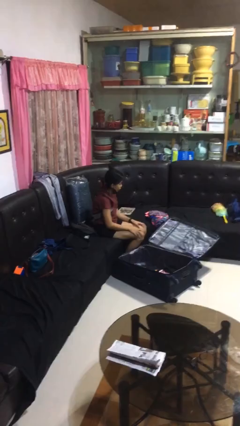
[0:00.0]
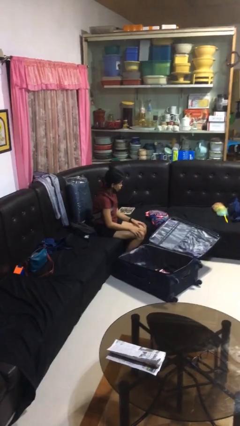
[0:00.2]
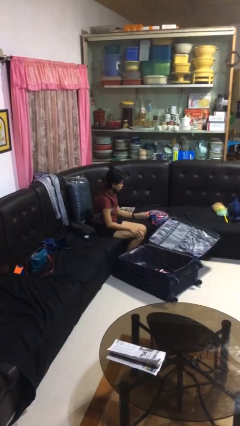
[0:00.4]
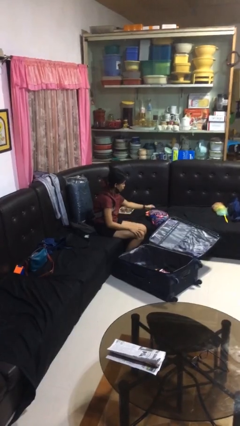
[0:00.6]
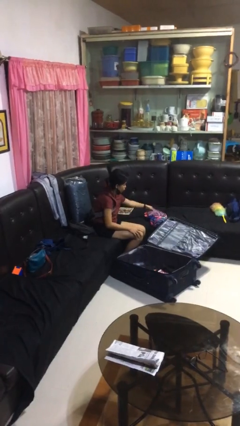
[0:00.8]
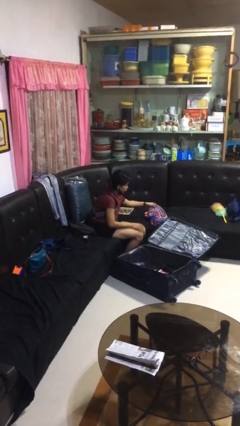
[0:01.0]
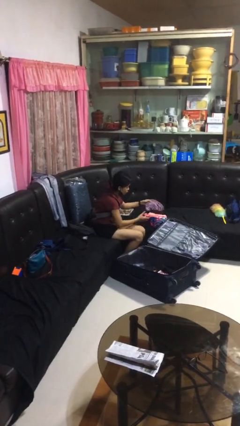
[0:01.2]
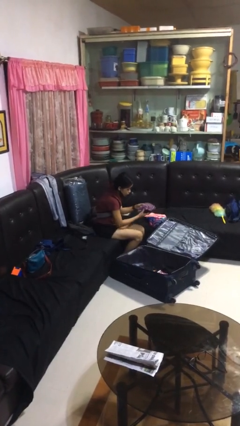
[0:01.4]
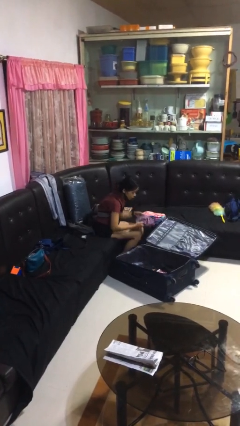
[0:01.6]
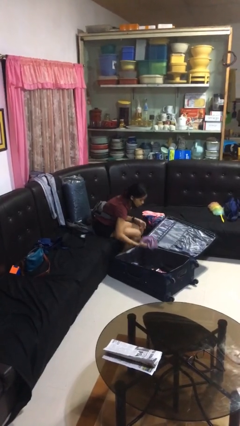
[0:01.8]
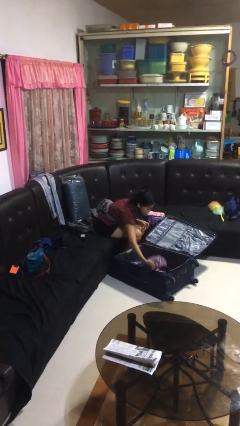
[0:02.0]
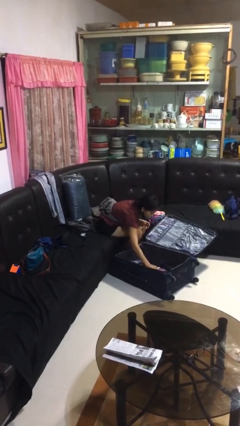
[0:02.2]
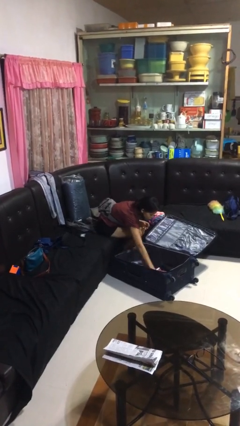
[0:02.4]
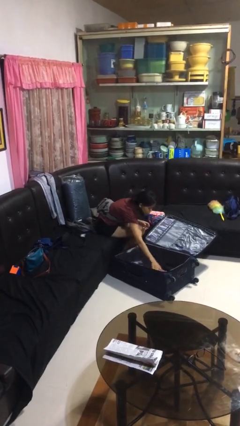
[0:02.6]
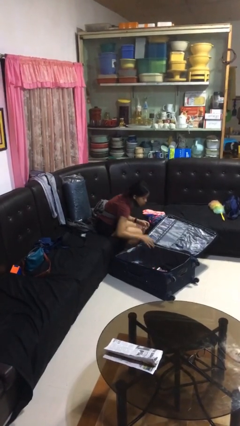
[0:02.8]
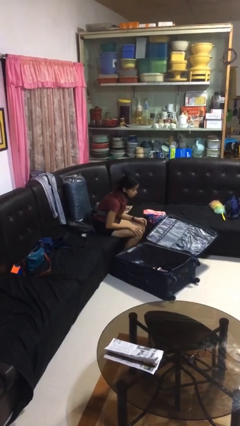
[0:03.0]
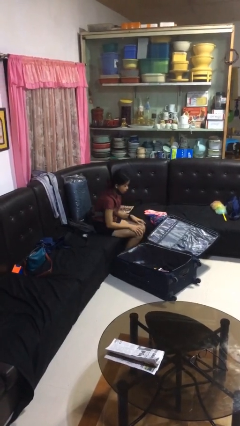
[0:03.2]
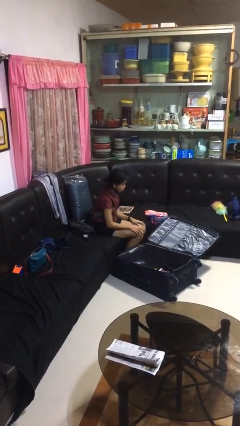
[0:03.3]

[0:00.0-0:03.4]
person loads clothes into suitcase

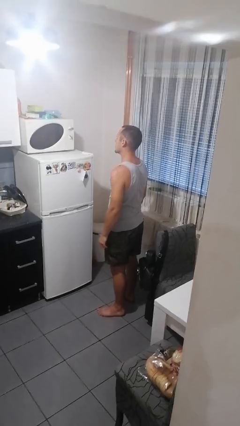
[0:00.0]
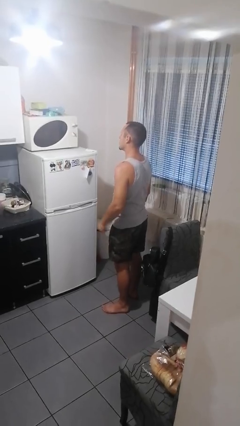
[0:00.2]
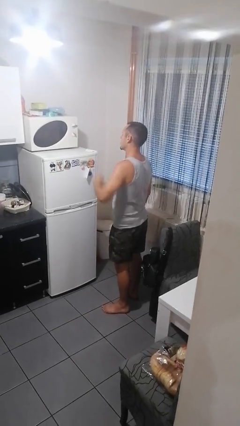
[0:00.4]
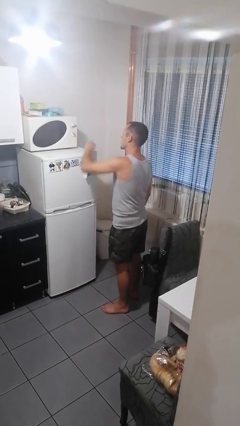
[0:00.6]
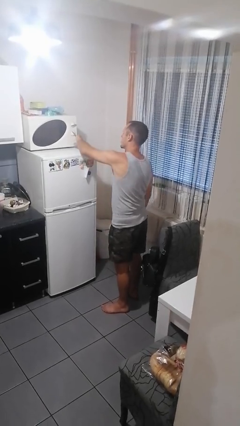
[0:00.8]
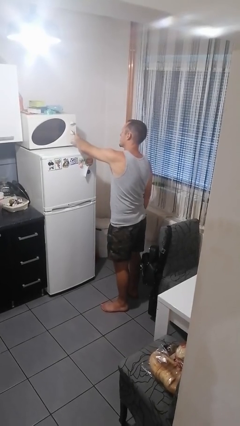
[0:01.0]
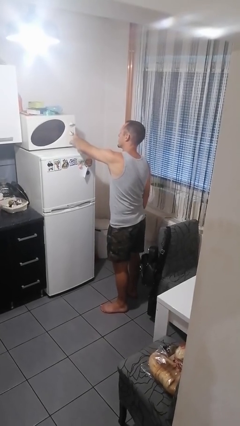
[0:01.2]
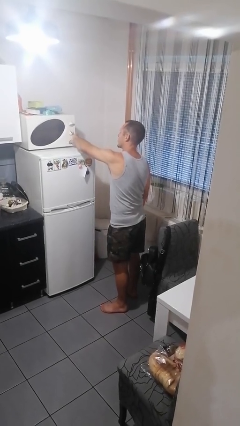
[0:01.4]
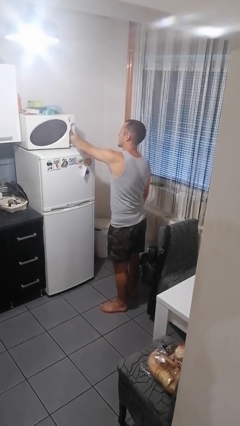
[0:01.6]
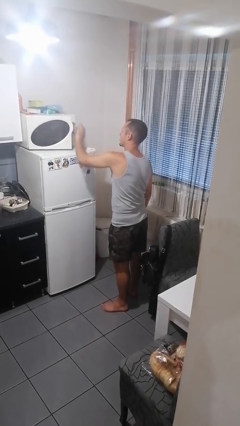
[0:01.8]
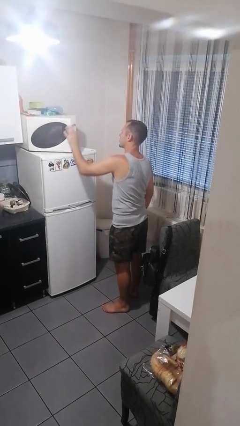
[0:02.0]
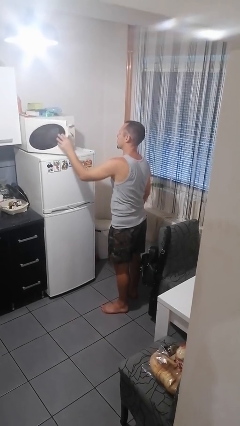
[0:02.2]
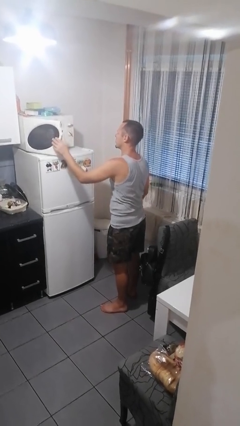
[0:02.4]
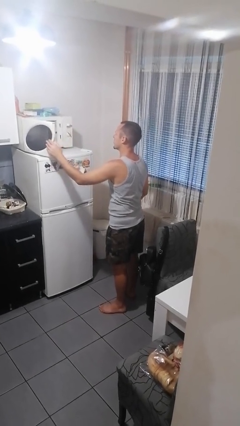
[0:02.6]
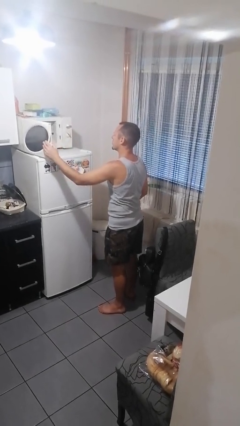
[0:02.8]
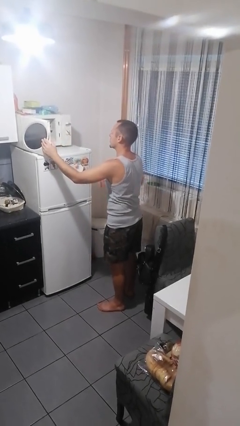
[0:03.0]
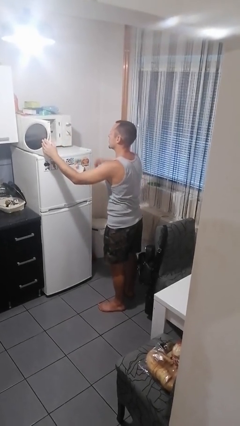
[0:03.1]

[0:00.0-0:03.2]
person opens microwave

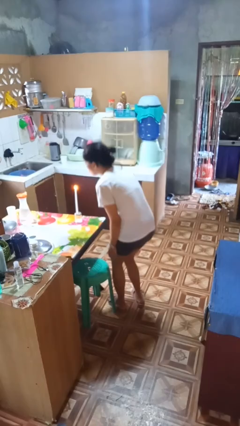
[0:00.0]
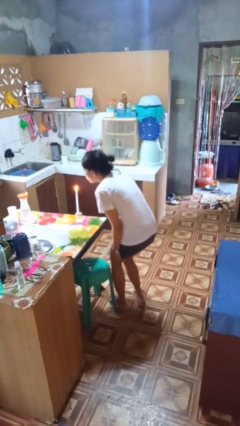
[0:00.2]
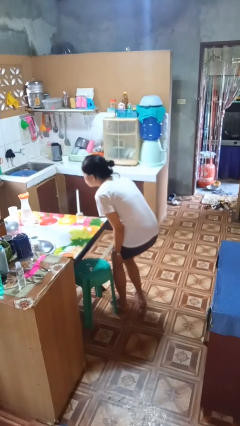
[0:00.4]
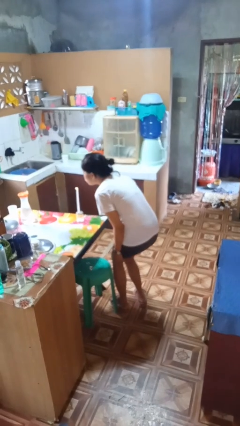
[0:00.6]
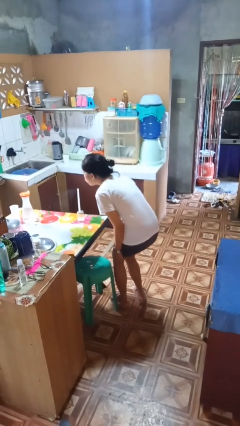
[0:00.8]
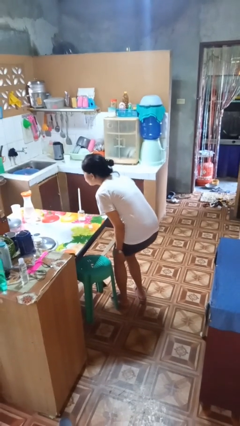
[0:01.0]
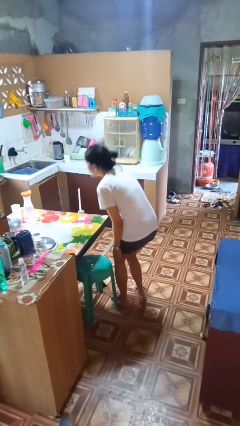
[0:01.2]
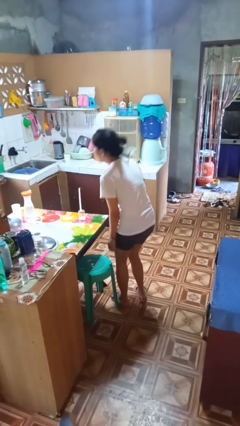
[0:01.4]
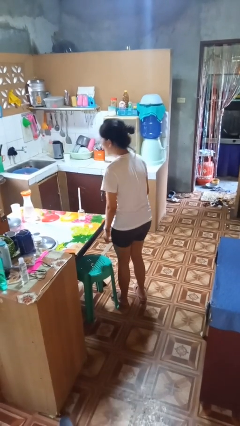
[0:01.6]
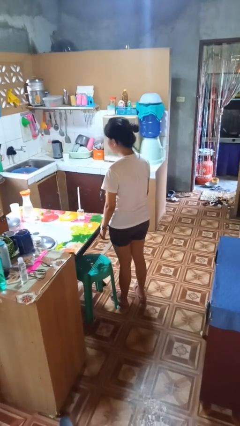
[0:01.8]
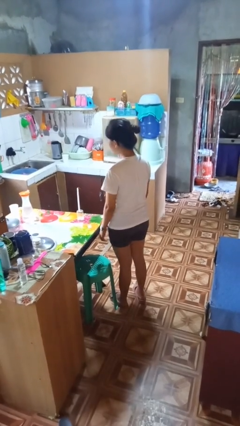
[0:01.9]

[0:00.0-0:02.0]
person extinguishes candle

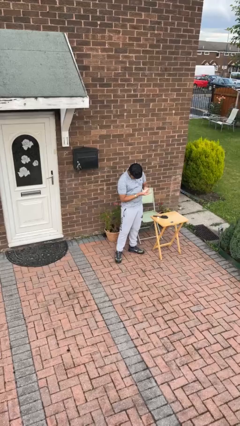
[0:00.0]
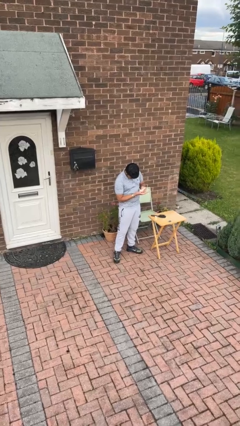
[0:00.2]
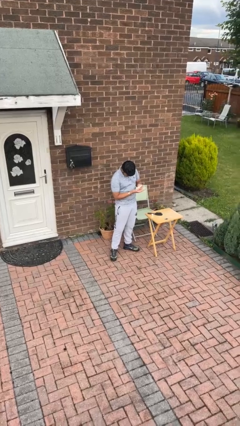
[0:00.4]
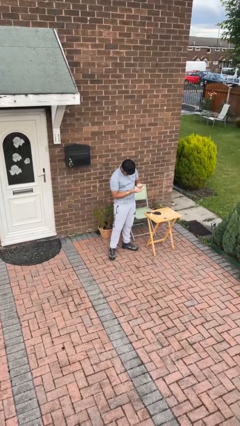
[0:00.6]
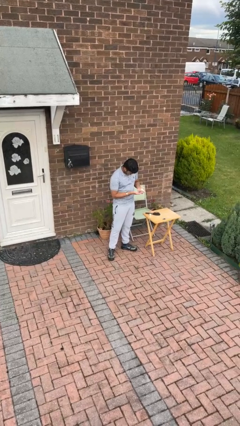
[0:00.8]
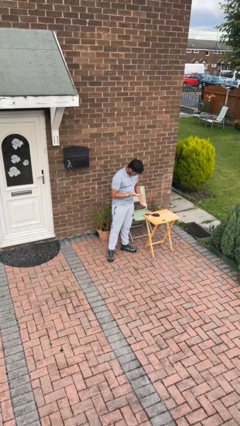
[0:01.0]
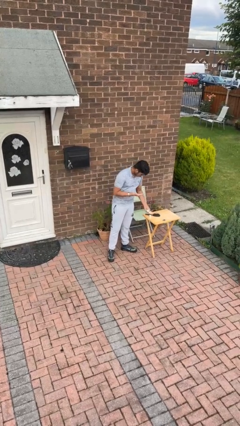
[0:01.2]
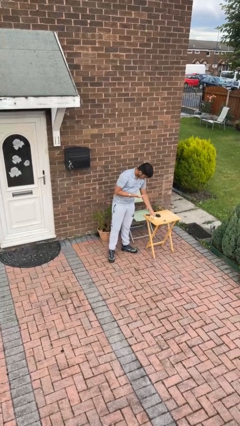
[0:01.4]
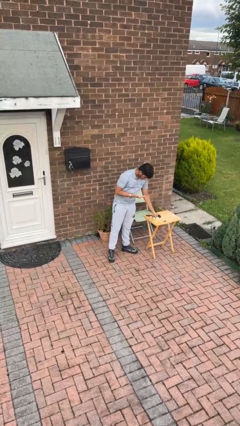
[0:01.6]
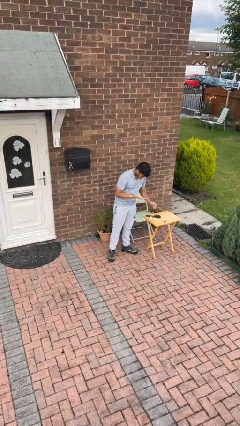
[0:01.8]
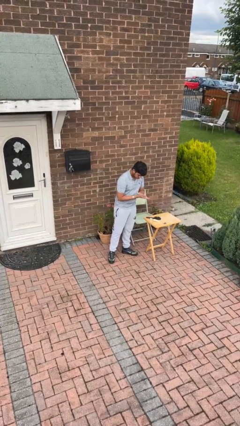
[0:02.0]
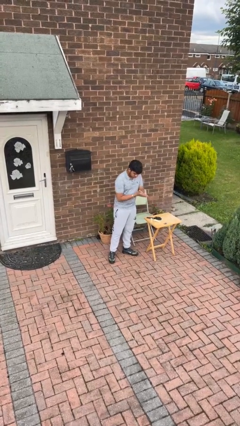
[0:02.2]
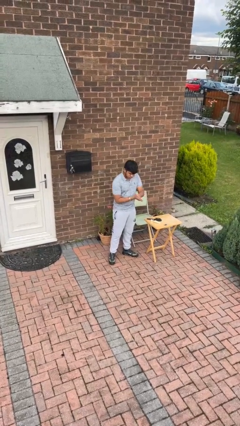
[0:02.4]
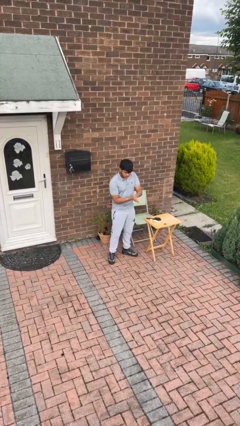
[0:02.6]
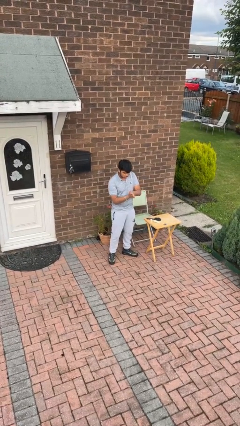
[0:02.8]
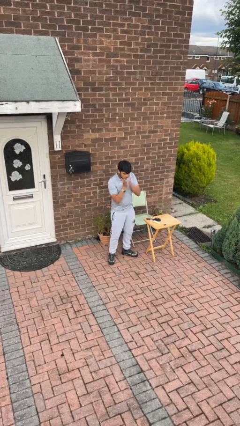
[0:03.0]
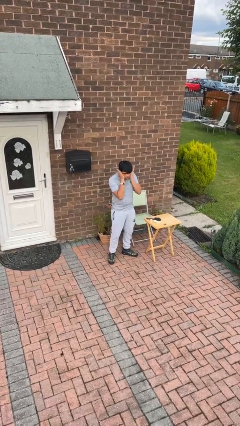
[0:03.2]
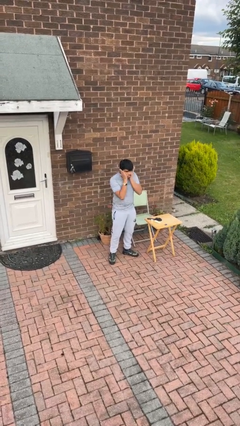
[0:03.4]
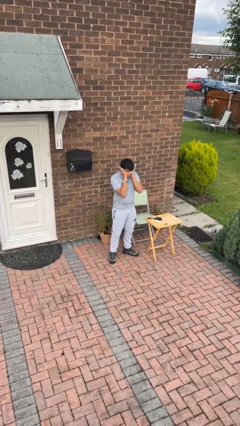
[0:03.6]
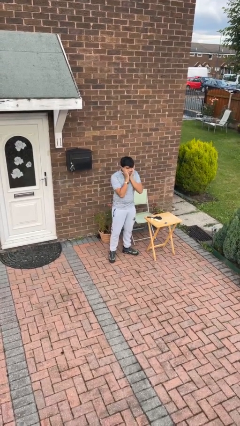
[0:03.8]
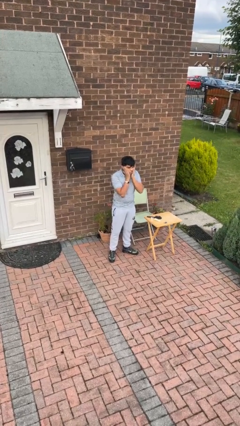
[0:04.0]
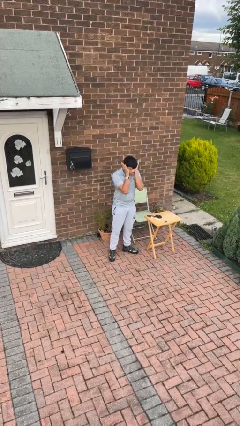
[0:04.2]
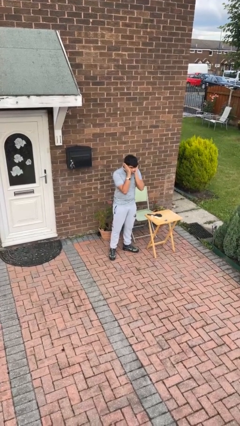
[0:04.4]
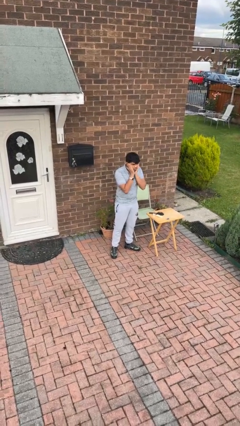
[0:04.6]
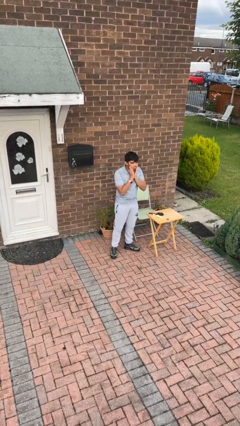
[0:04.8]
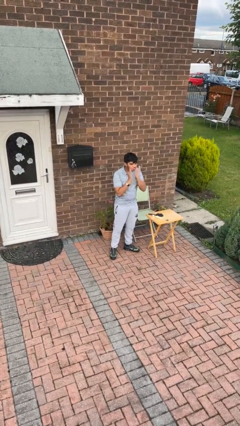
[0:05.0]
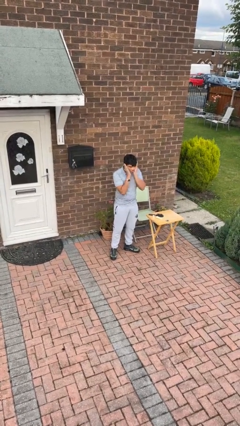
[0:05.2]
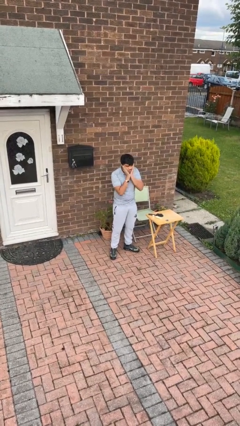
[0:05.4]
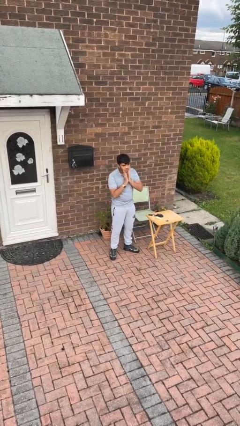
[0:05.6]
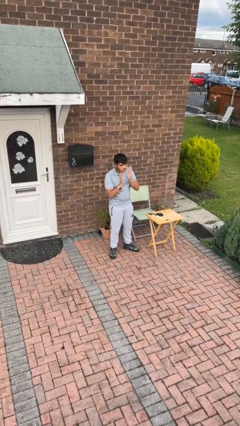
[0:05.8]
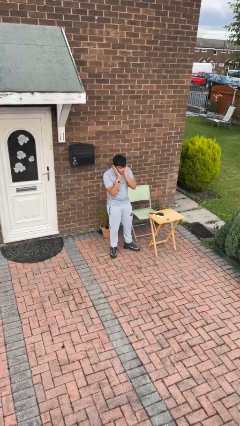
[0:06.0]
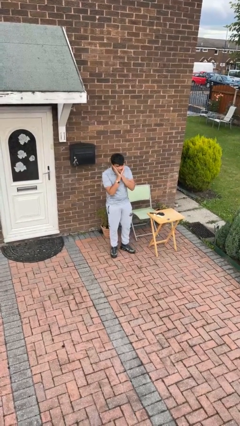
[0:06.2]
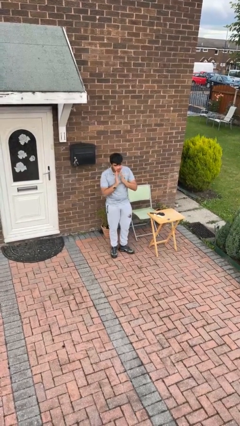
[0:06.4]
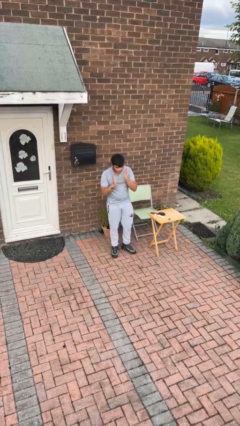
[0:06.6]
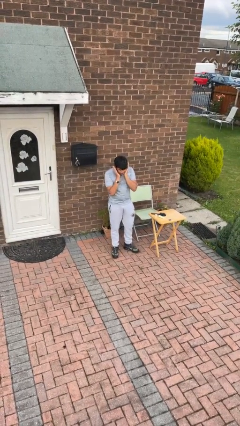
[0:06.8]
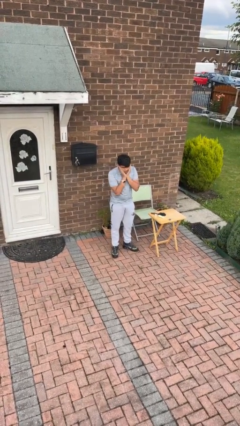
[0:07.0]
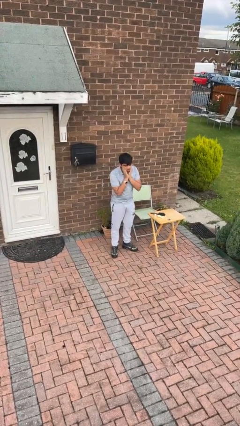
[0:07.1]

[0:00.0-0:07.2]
person applies facial moisturizer

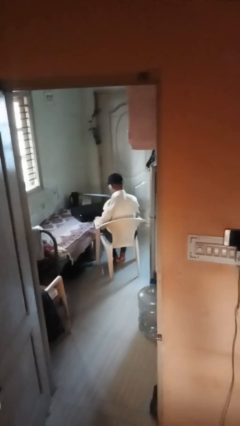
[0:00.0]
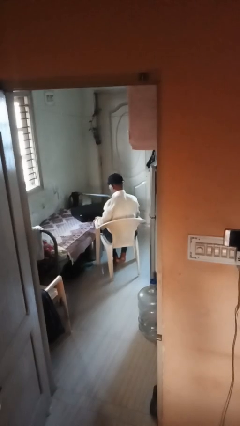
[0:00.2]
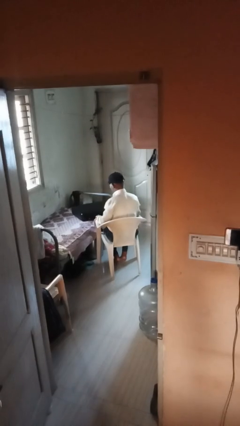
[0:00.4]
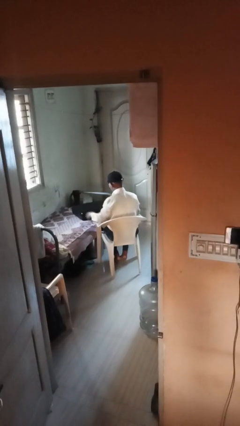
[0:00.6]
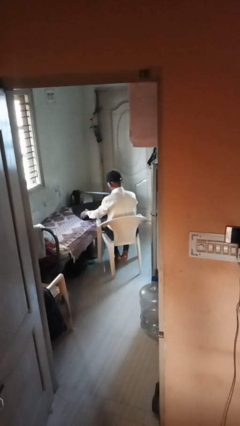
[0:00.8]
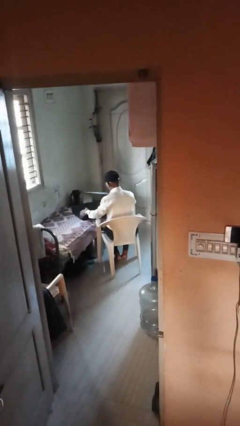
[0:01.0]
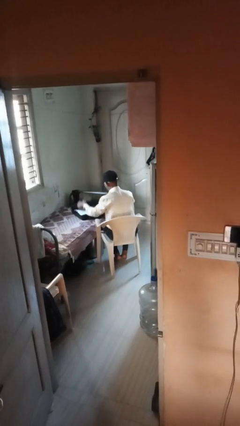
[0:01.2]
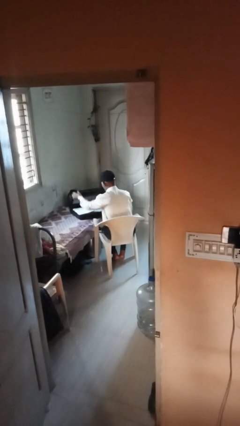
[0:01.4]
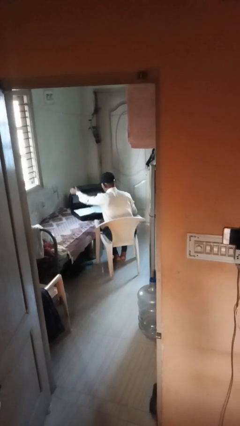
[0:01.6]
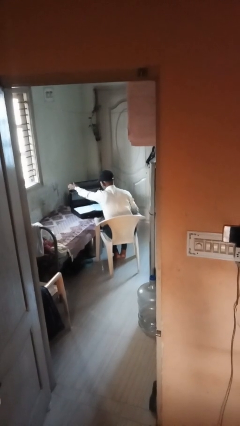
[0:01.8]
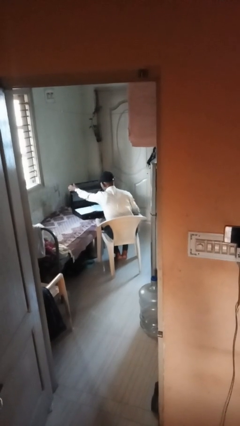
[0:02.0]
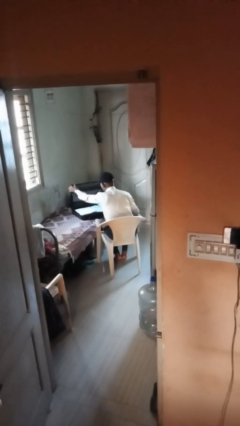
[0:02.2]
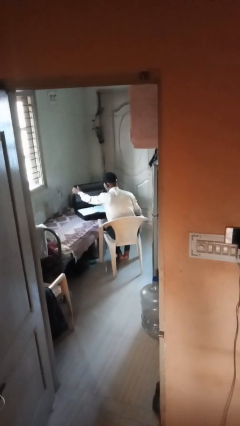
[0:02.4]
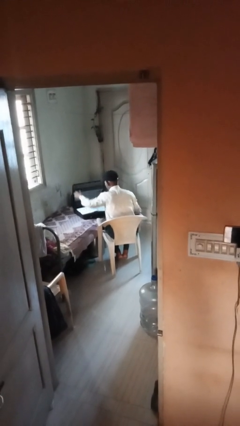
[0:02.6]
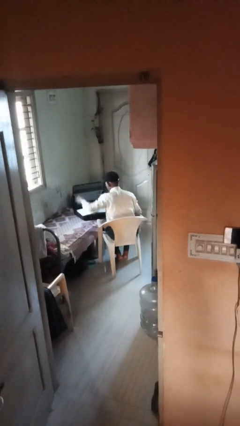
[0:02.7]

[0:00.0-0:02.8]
person opens suitcase
